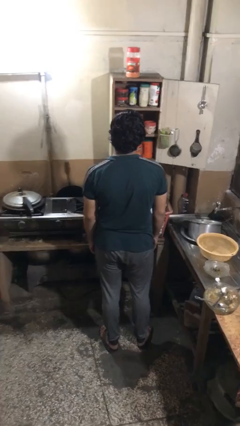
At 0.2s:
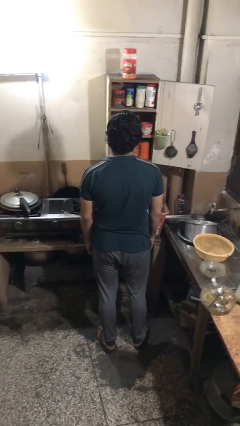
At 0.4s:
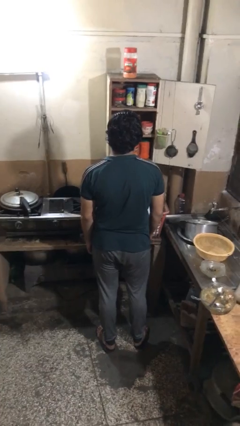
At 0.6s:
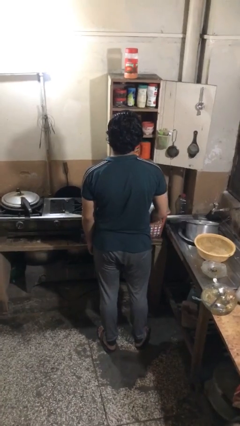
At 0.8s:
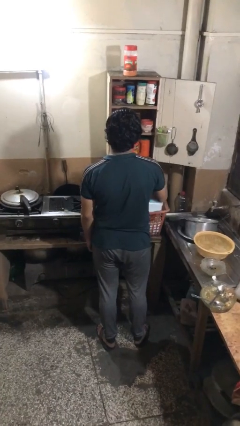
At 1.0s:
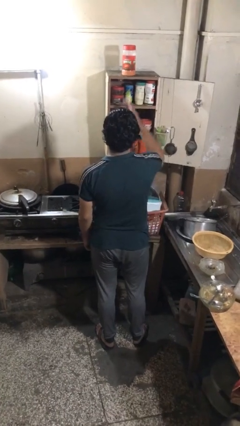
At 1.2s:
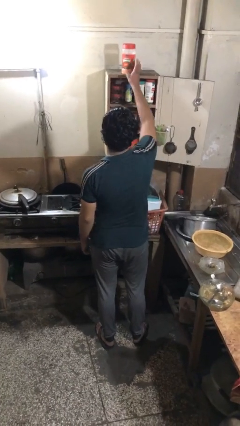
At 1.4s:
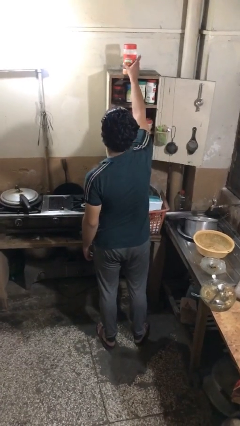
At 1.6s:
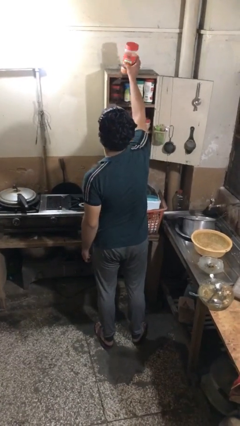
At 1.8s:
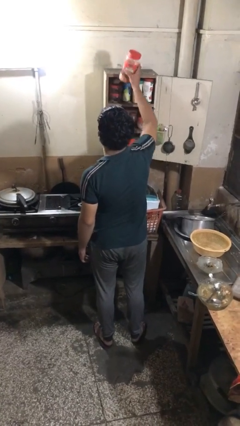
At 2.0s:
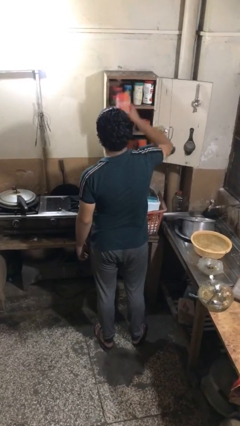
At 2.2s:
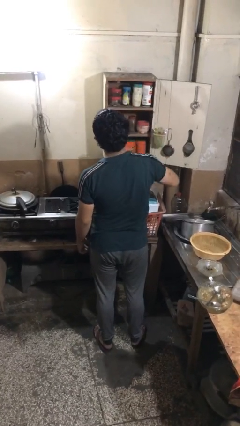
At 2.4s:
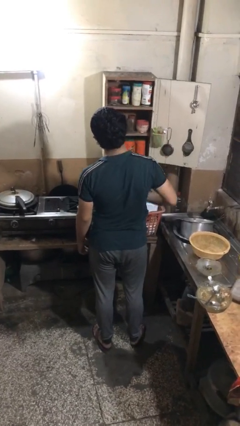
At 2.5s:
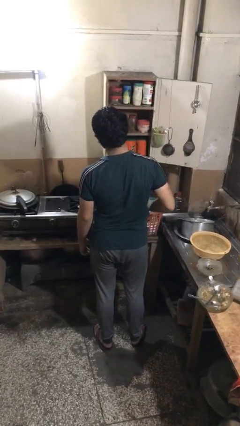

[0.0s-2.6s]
person puts object in cabinet

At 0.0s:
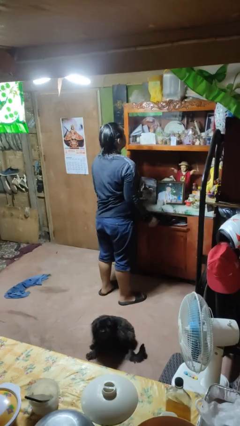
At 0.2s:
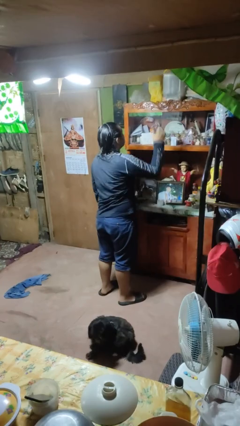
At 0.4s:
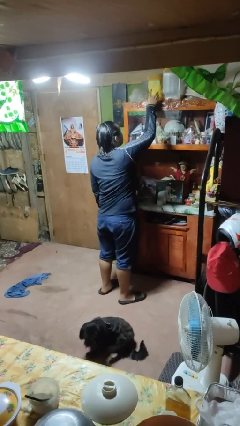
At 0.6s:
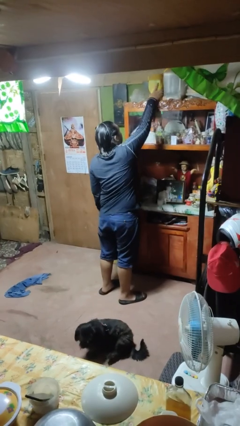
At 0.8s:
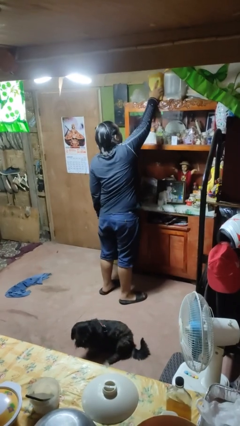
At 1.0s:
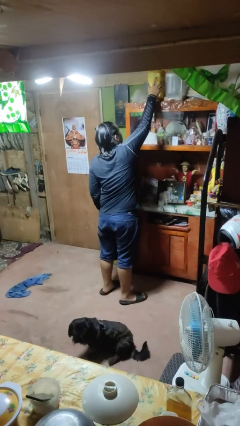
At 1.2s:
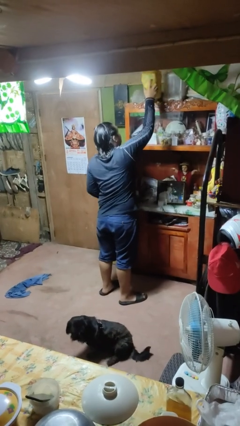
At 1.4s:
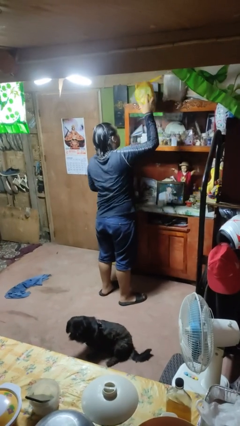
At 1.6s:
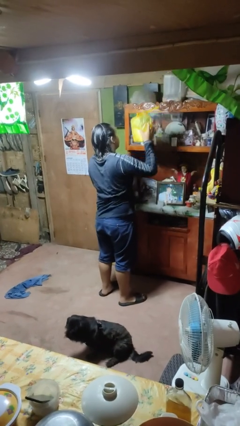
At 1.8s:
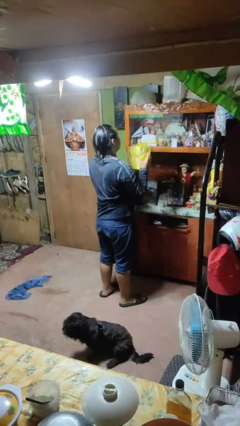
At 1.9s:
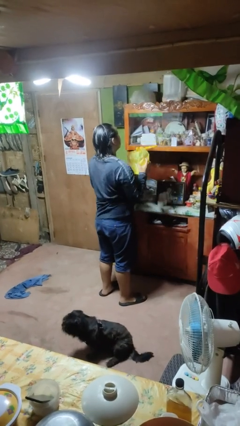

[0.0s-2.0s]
person picks up object from shelf

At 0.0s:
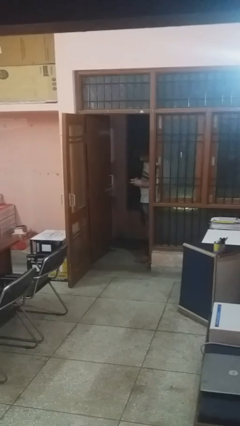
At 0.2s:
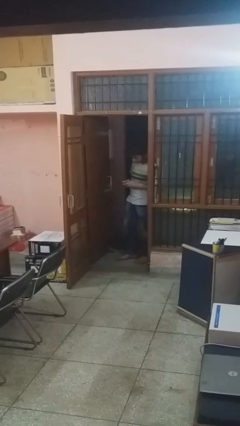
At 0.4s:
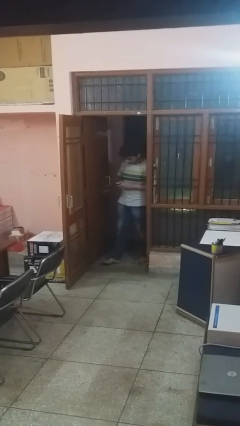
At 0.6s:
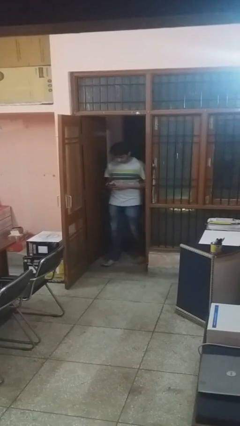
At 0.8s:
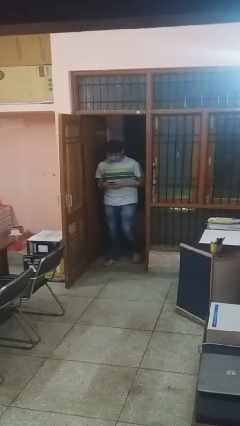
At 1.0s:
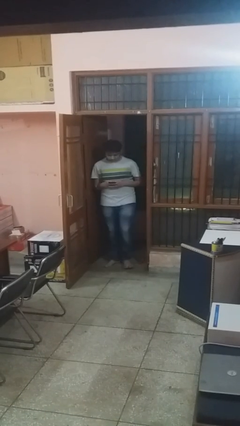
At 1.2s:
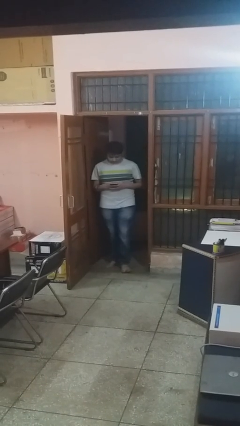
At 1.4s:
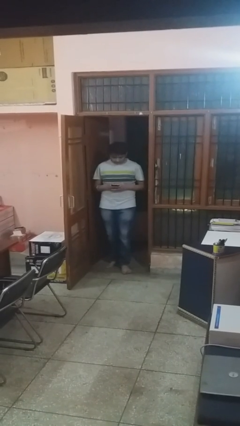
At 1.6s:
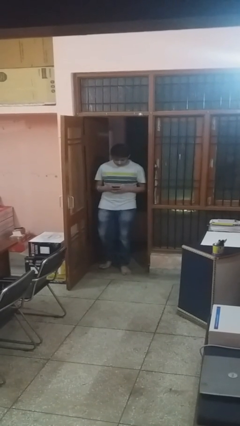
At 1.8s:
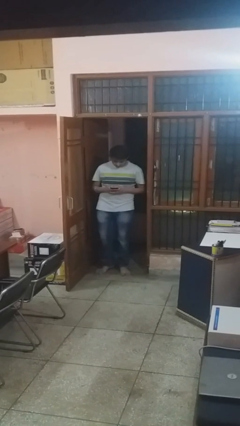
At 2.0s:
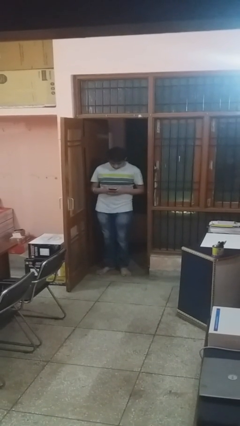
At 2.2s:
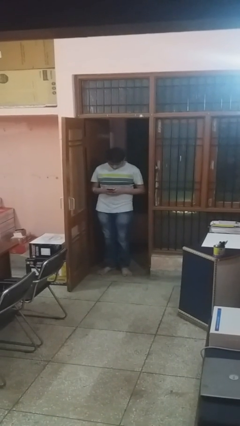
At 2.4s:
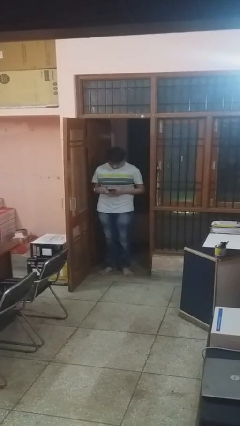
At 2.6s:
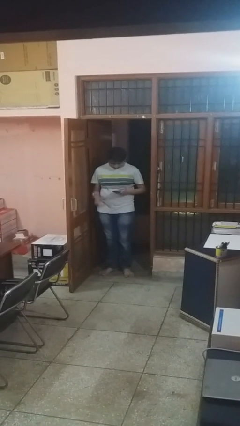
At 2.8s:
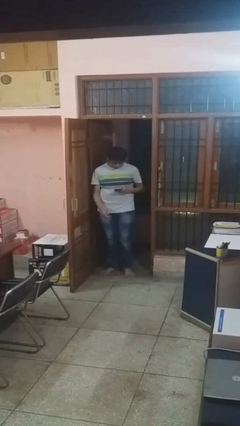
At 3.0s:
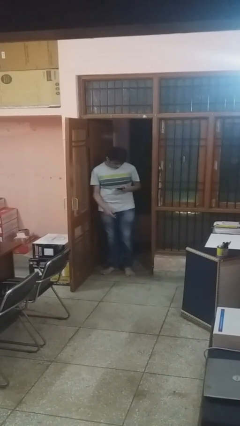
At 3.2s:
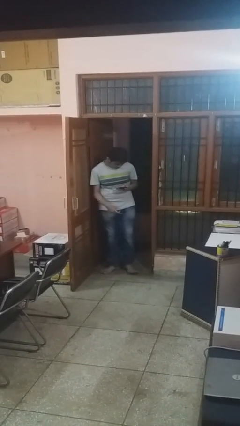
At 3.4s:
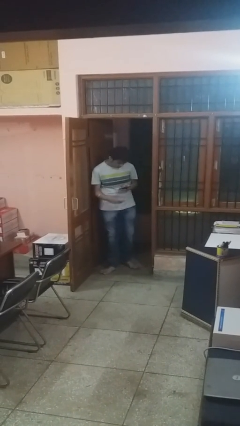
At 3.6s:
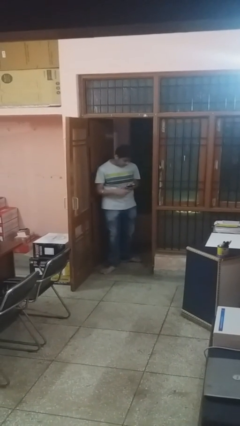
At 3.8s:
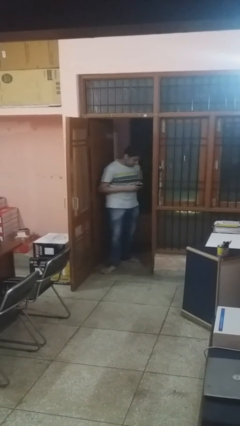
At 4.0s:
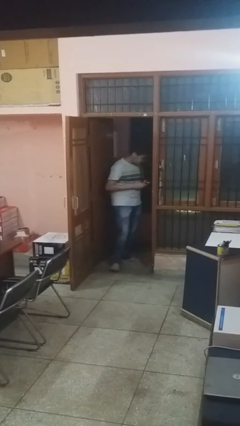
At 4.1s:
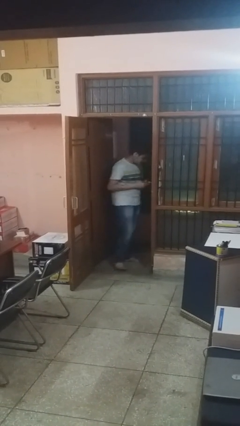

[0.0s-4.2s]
person enters scene through structure

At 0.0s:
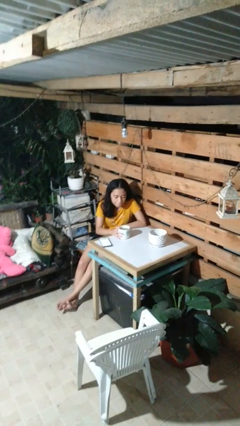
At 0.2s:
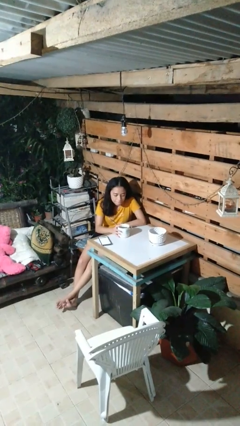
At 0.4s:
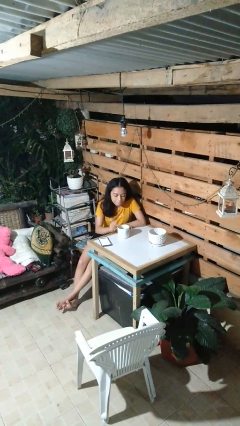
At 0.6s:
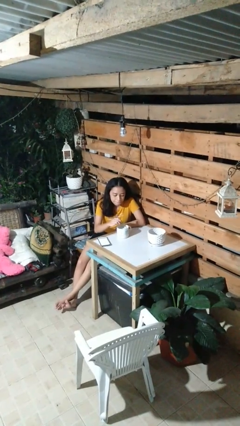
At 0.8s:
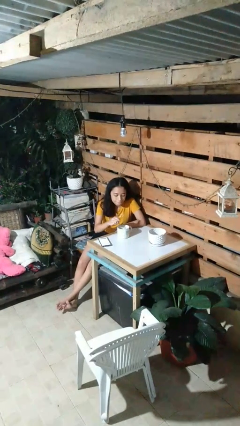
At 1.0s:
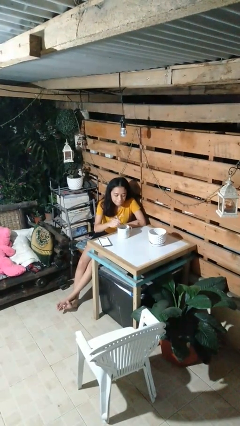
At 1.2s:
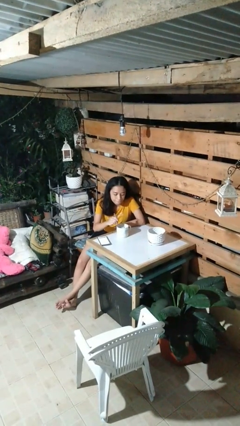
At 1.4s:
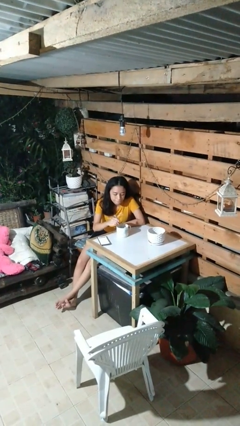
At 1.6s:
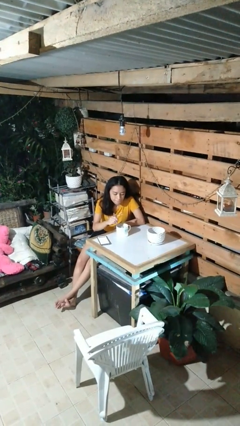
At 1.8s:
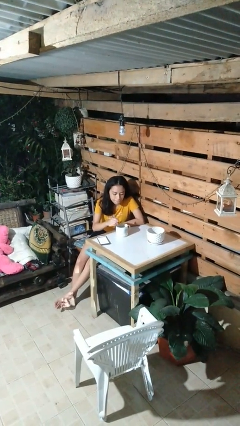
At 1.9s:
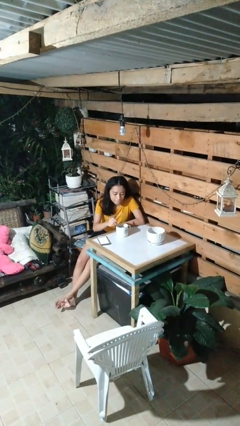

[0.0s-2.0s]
person stirs mug

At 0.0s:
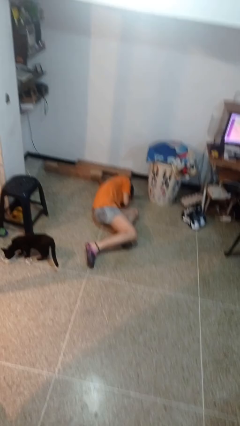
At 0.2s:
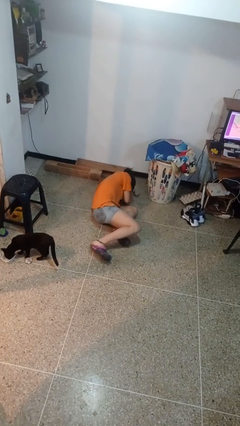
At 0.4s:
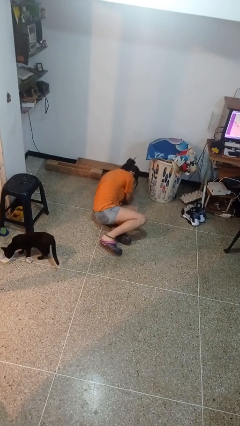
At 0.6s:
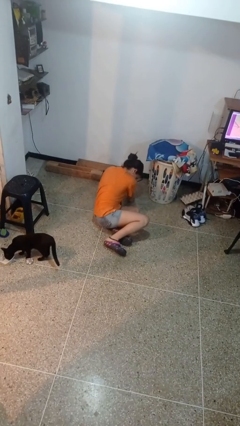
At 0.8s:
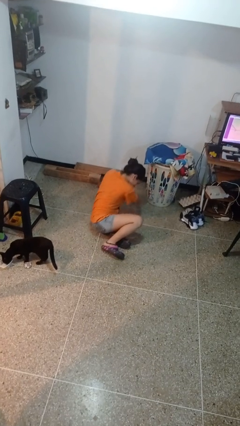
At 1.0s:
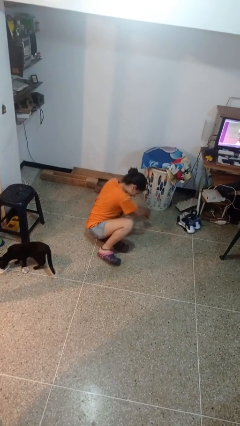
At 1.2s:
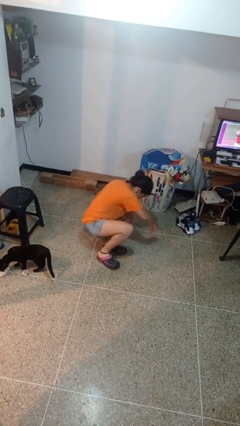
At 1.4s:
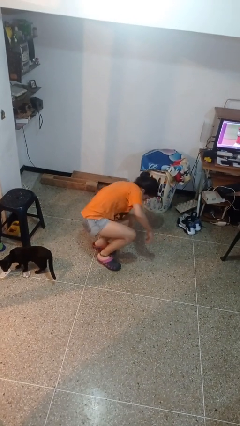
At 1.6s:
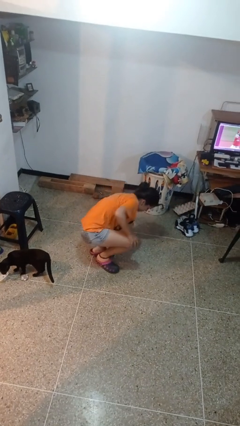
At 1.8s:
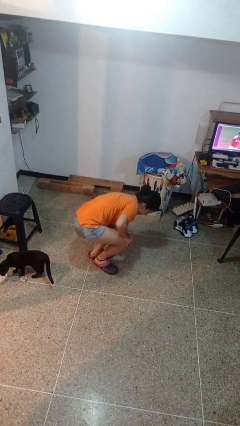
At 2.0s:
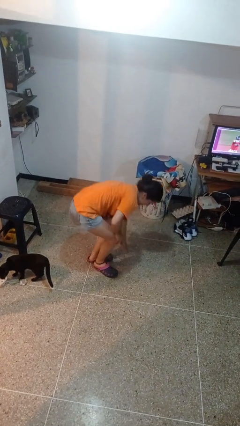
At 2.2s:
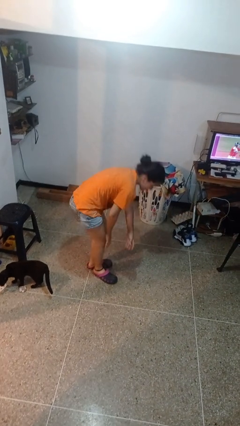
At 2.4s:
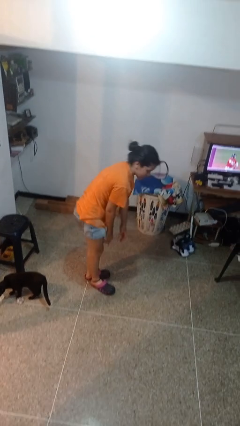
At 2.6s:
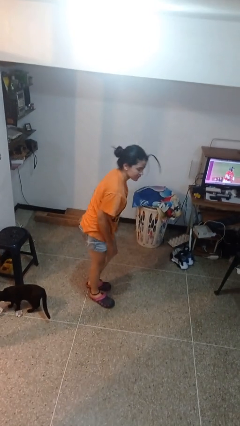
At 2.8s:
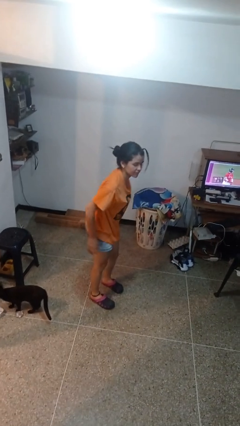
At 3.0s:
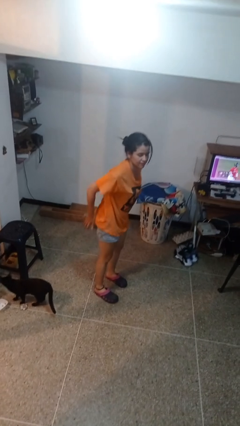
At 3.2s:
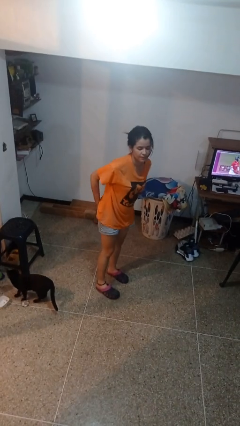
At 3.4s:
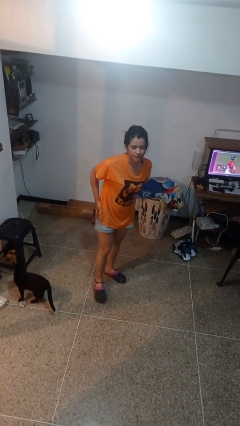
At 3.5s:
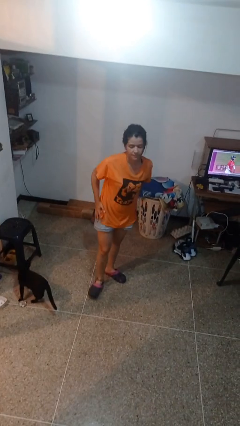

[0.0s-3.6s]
person stands up from floor

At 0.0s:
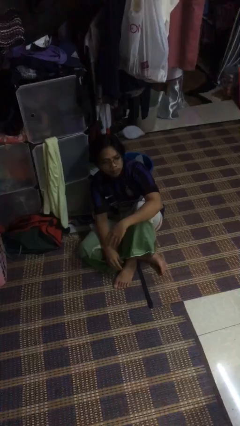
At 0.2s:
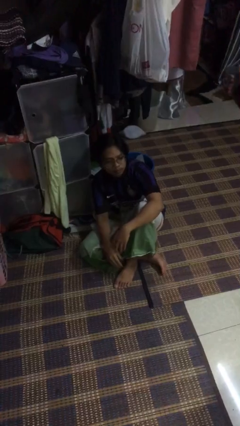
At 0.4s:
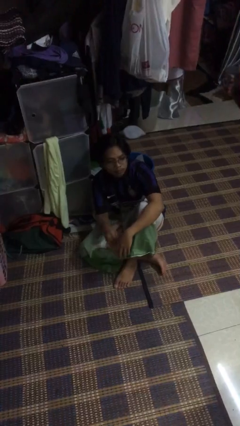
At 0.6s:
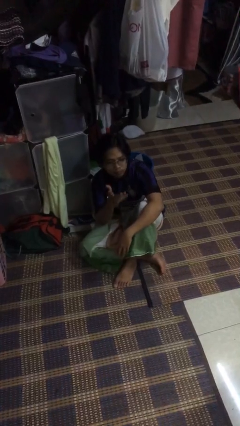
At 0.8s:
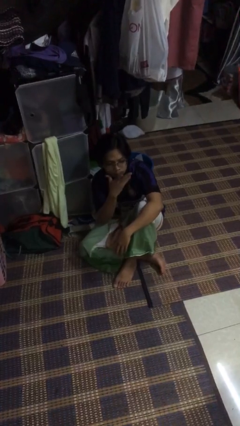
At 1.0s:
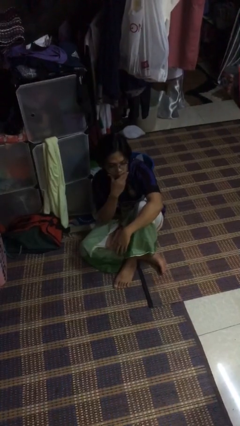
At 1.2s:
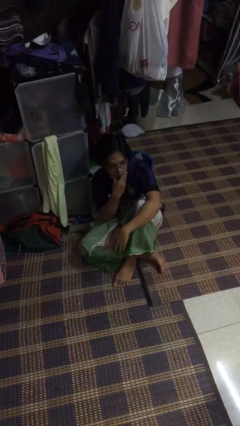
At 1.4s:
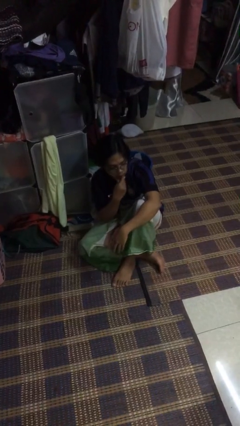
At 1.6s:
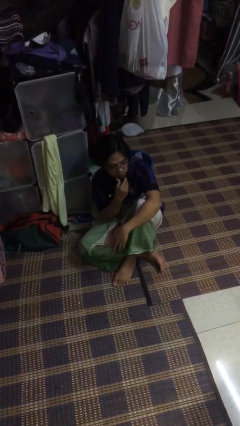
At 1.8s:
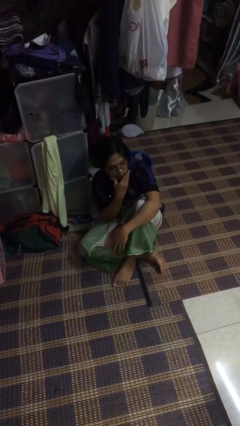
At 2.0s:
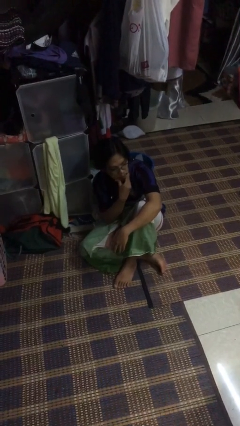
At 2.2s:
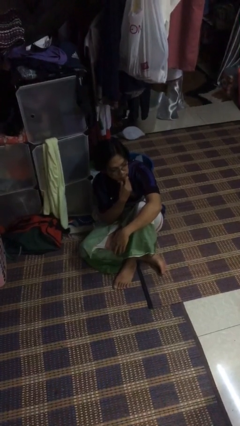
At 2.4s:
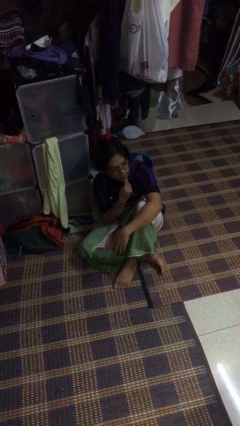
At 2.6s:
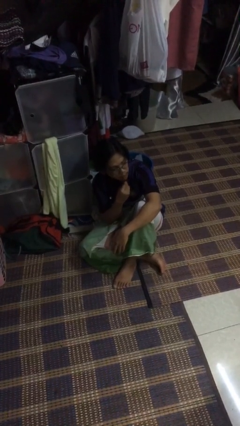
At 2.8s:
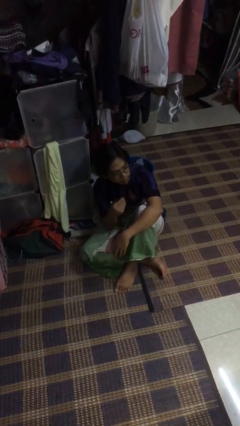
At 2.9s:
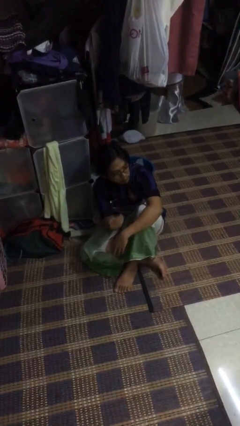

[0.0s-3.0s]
person strokes chin
